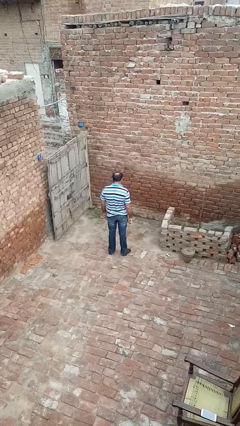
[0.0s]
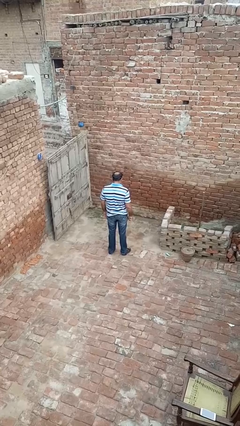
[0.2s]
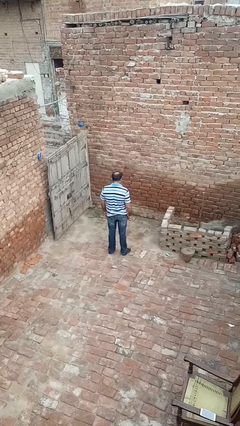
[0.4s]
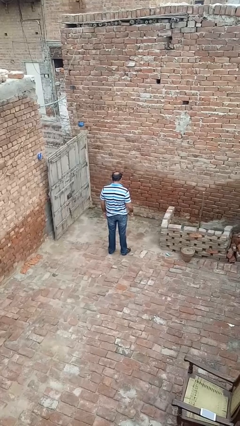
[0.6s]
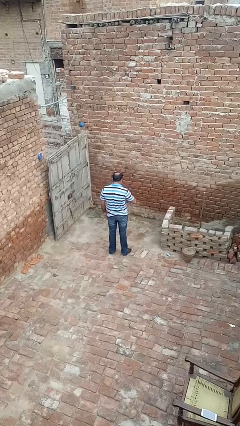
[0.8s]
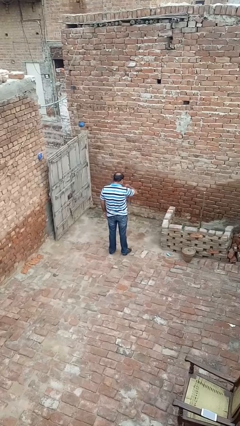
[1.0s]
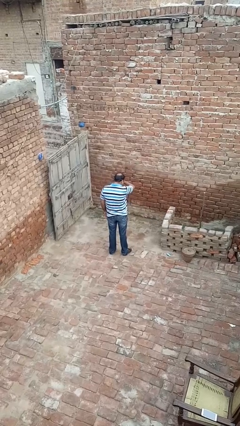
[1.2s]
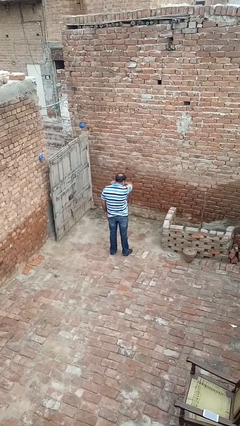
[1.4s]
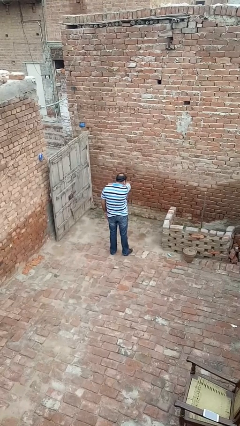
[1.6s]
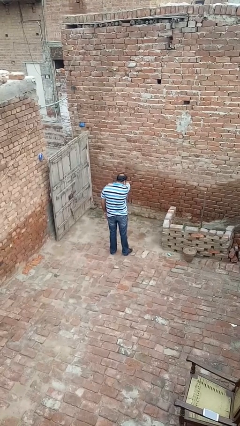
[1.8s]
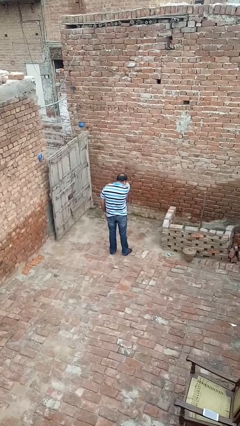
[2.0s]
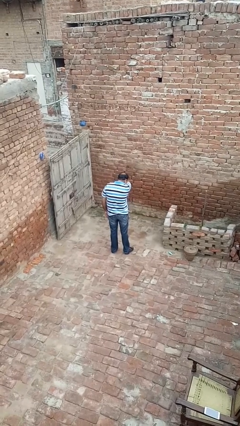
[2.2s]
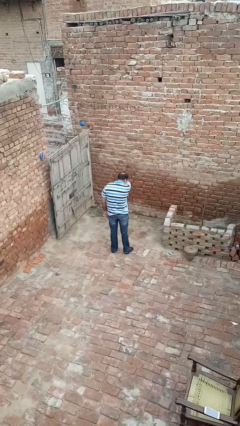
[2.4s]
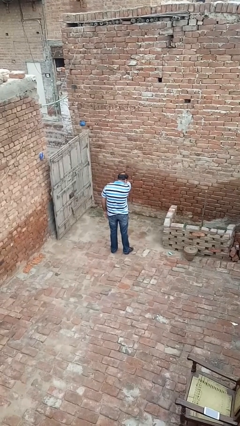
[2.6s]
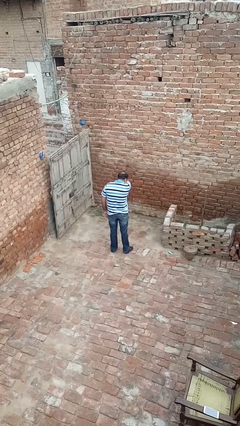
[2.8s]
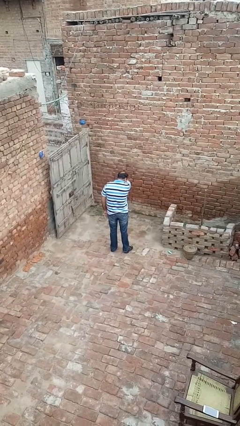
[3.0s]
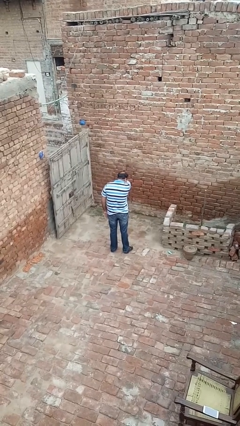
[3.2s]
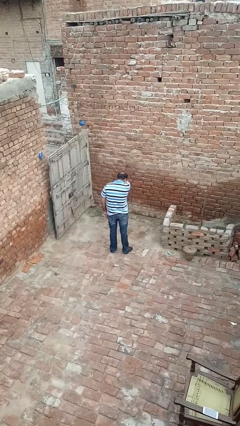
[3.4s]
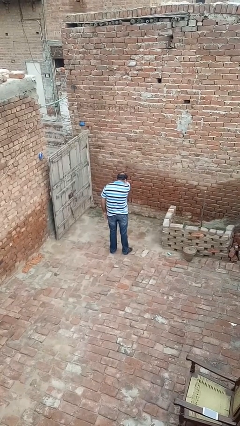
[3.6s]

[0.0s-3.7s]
person sneezes into arm

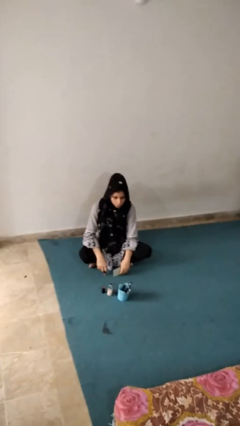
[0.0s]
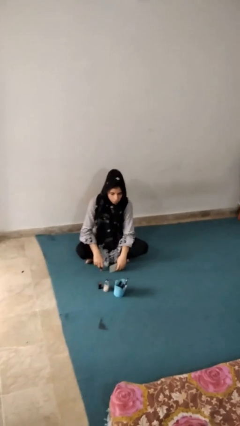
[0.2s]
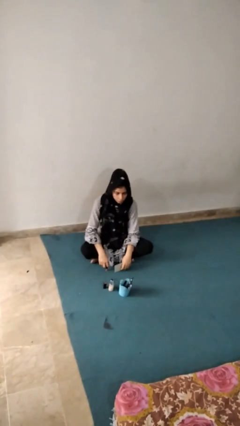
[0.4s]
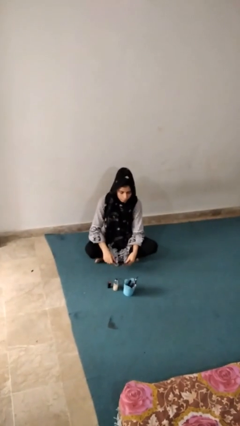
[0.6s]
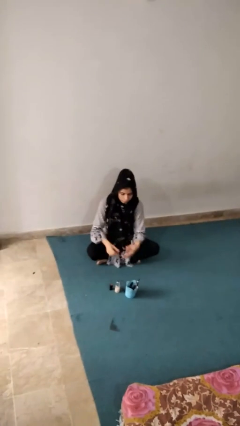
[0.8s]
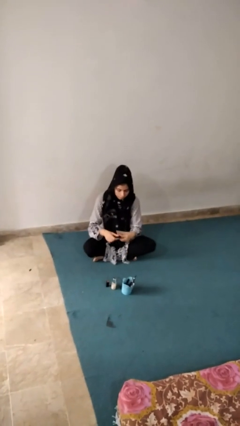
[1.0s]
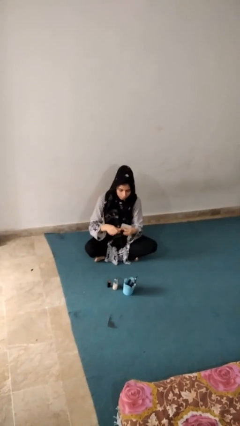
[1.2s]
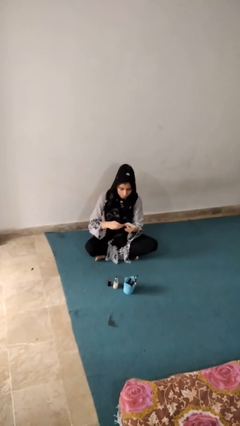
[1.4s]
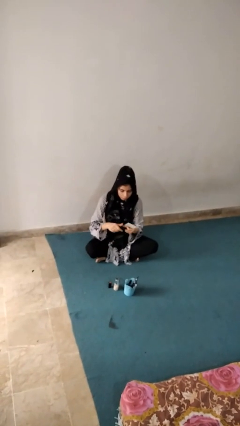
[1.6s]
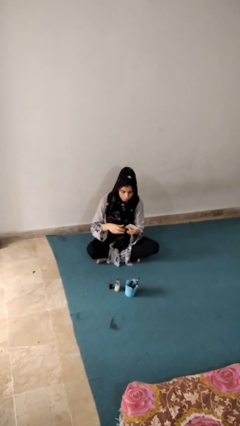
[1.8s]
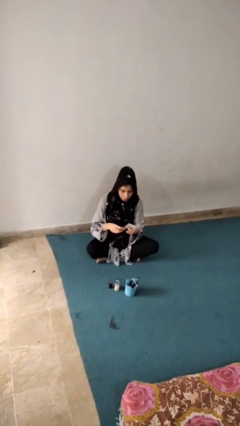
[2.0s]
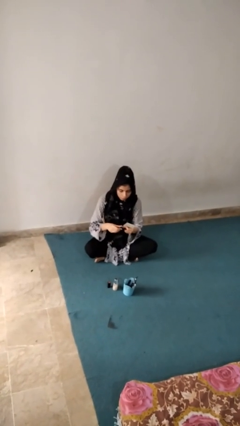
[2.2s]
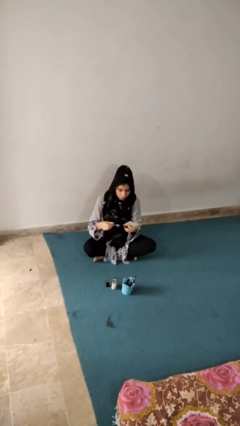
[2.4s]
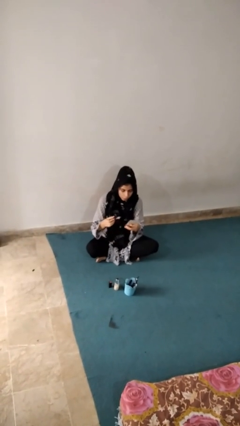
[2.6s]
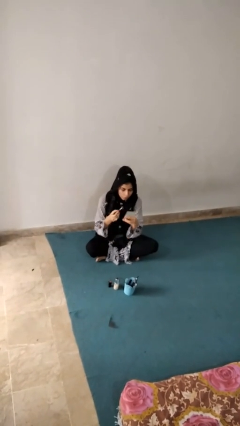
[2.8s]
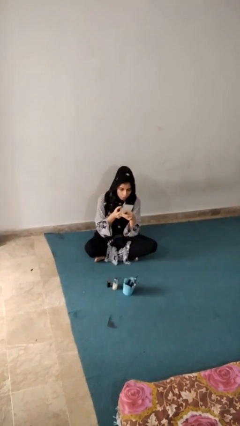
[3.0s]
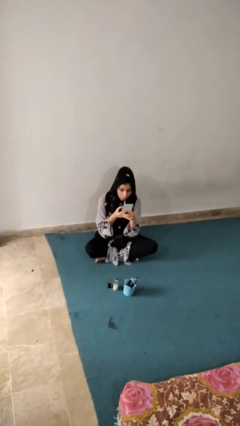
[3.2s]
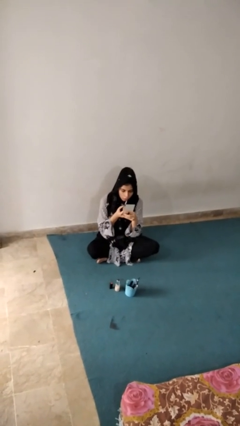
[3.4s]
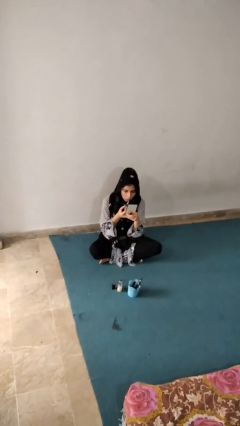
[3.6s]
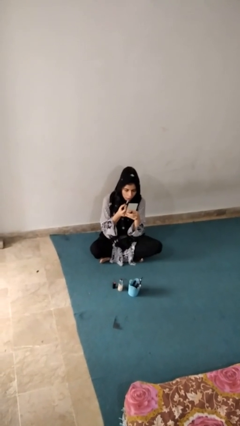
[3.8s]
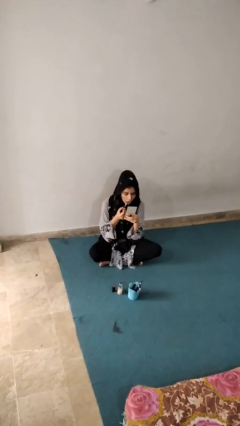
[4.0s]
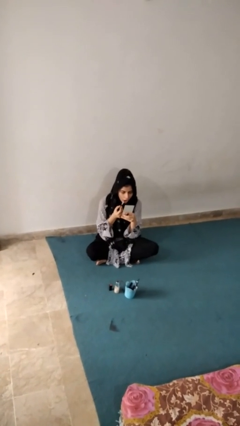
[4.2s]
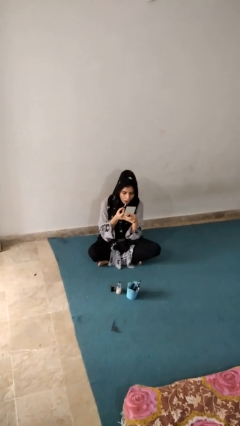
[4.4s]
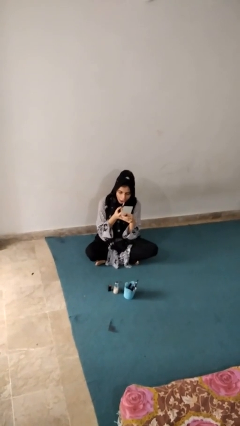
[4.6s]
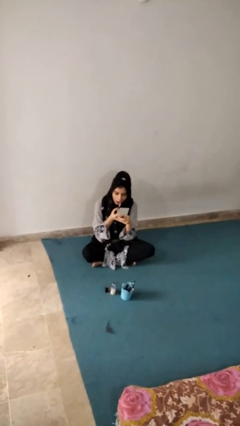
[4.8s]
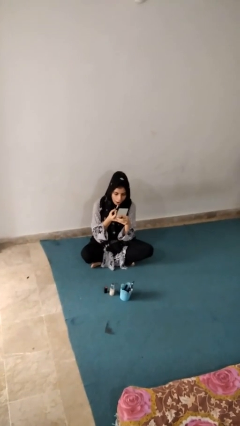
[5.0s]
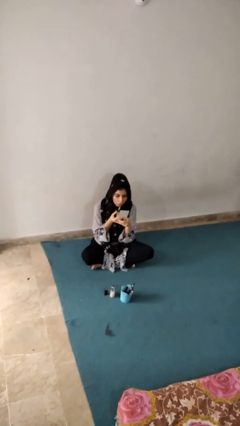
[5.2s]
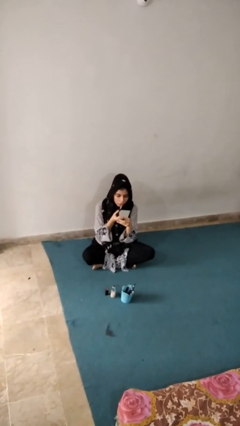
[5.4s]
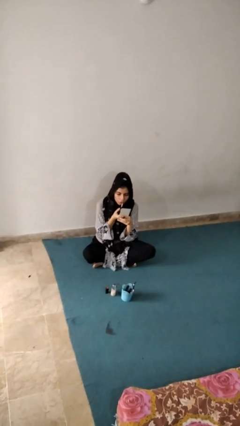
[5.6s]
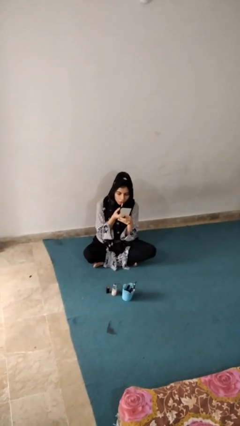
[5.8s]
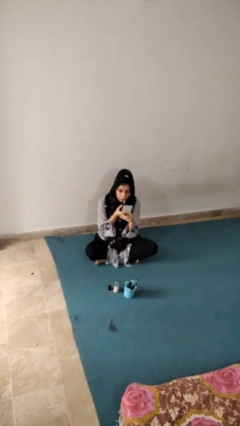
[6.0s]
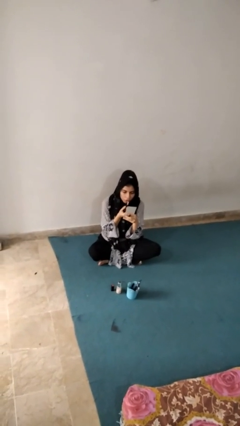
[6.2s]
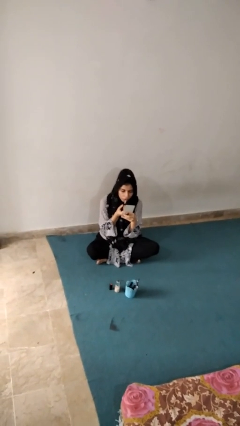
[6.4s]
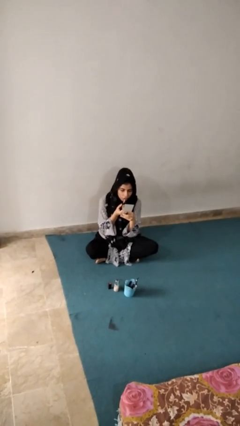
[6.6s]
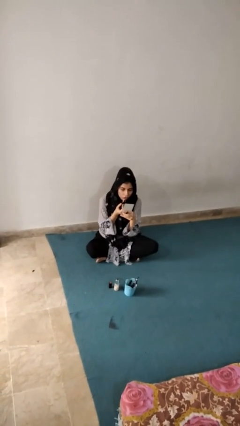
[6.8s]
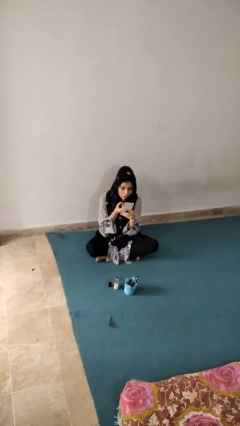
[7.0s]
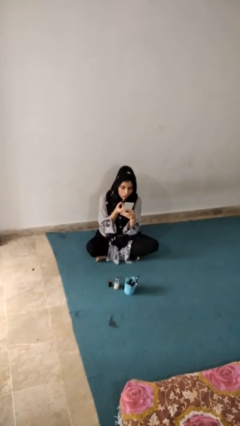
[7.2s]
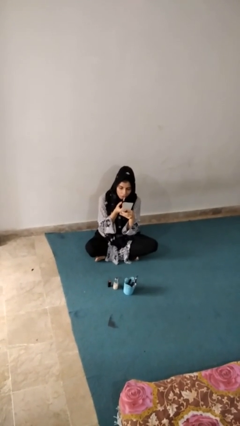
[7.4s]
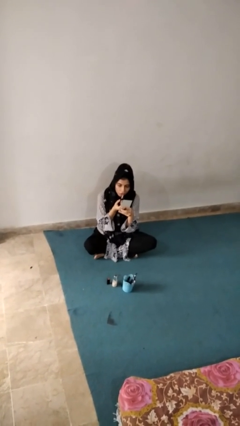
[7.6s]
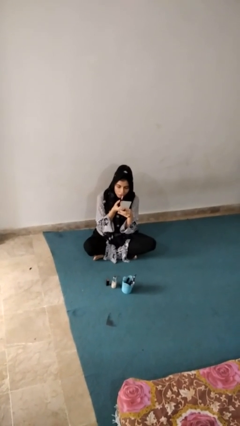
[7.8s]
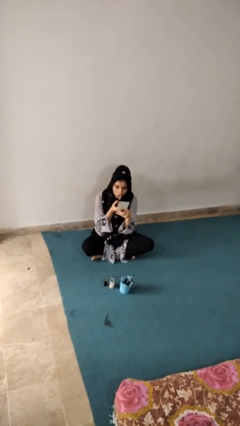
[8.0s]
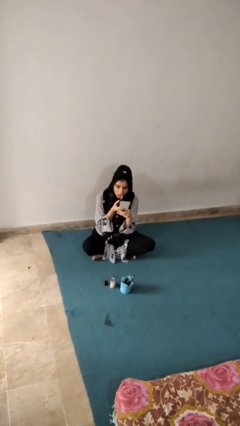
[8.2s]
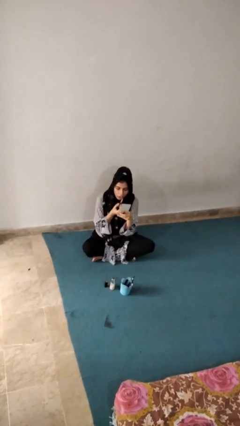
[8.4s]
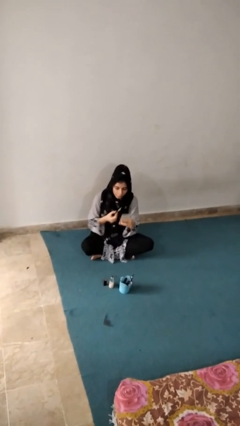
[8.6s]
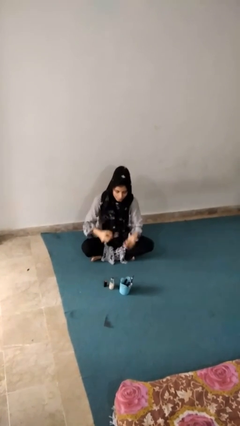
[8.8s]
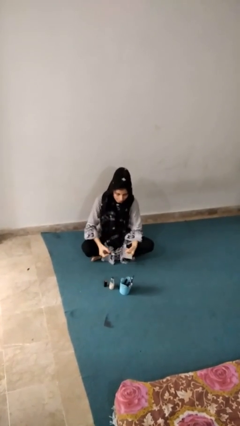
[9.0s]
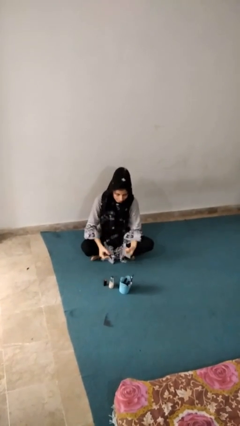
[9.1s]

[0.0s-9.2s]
person applies lip makeup

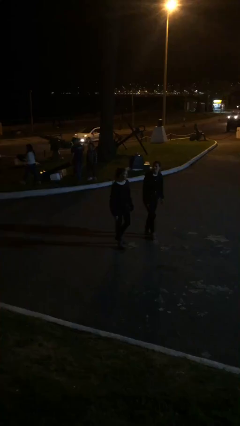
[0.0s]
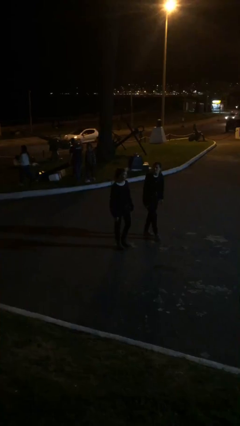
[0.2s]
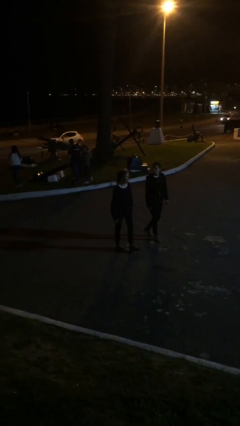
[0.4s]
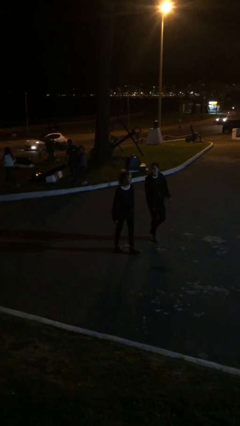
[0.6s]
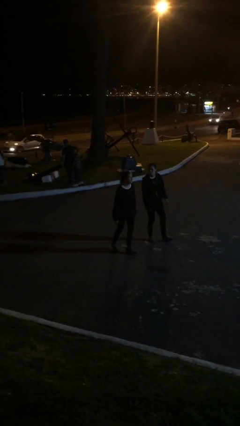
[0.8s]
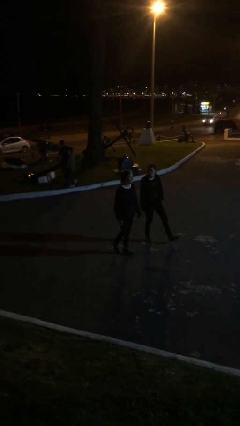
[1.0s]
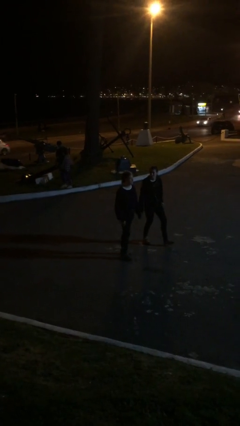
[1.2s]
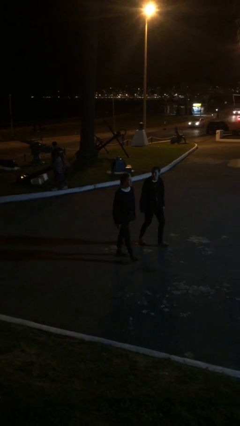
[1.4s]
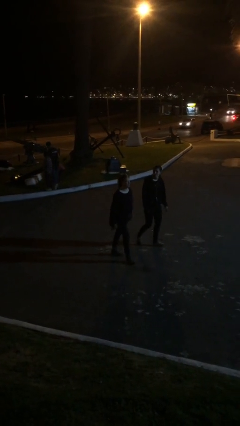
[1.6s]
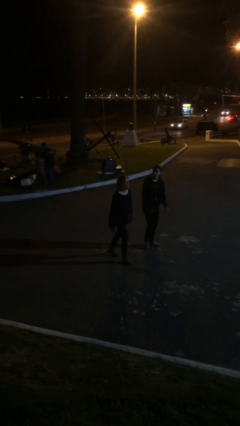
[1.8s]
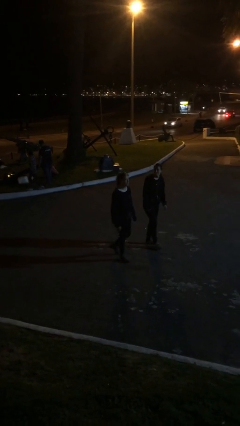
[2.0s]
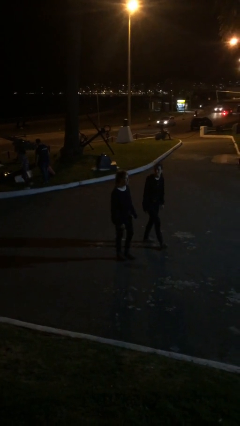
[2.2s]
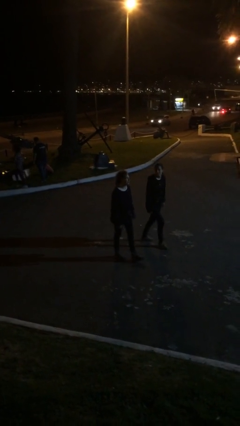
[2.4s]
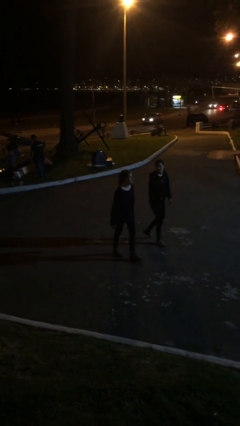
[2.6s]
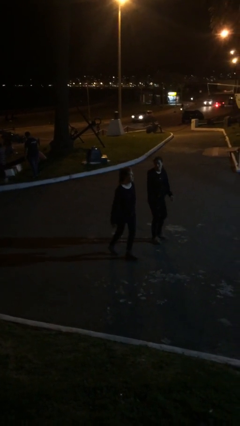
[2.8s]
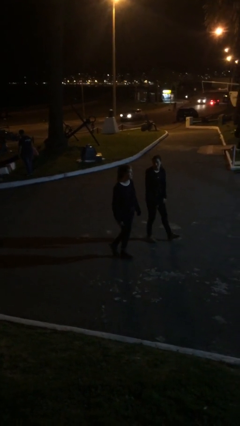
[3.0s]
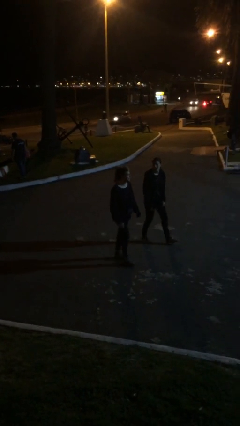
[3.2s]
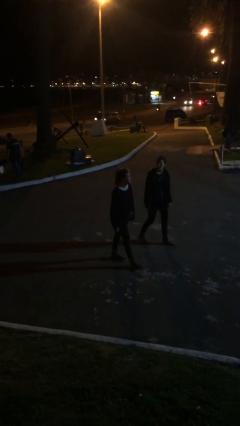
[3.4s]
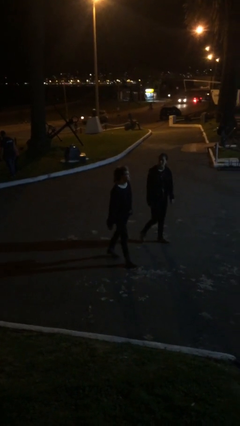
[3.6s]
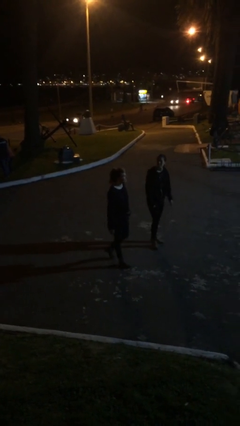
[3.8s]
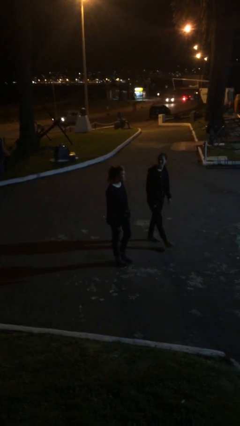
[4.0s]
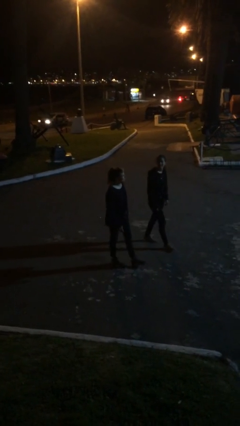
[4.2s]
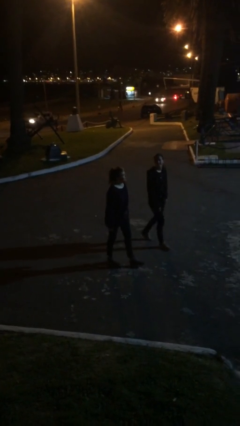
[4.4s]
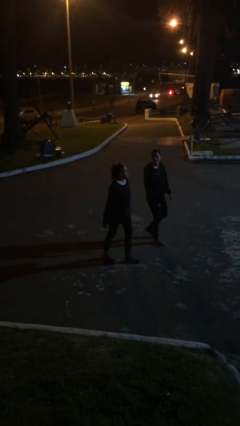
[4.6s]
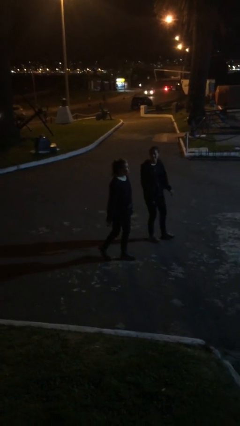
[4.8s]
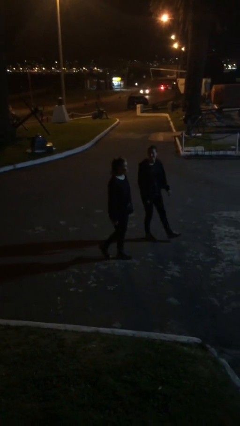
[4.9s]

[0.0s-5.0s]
person talks to person
